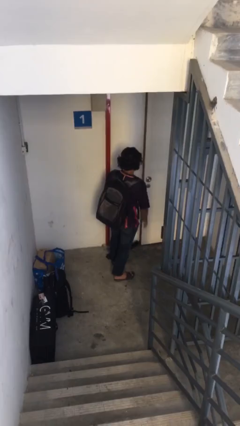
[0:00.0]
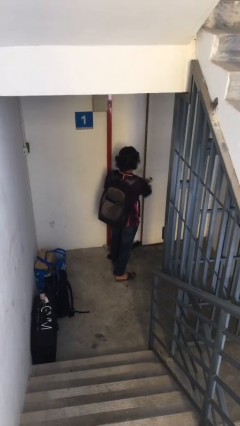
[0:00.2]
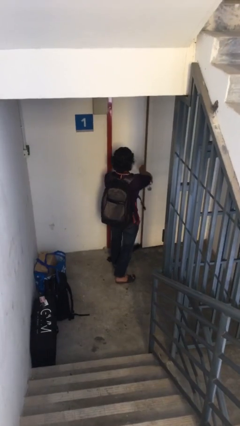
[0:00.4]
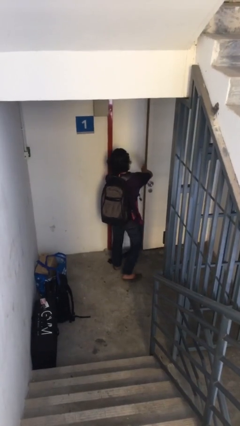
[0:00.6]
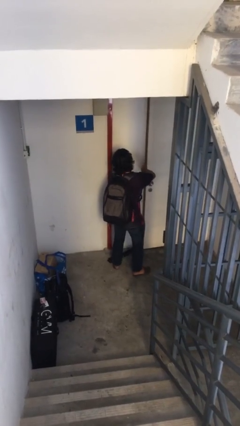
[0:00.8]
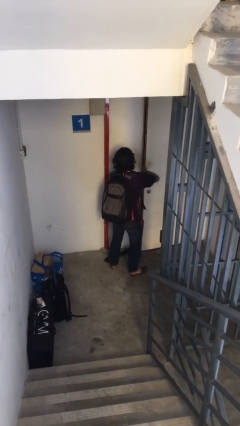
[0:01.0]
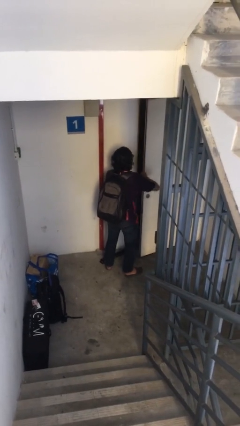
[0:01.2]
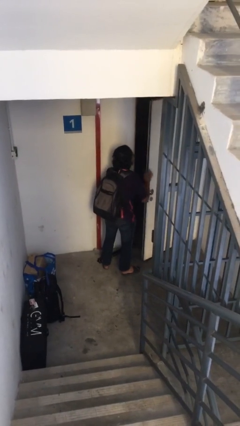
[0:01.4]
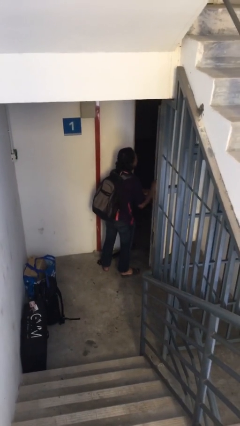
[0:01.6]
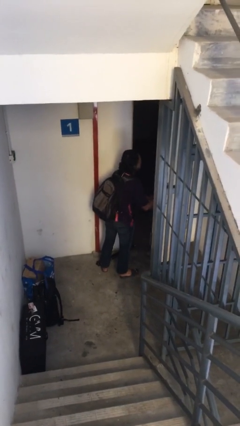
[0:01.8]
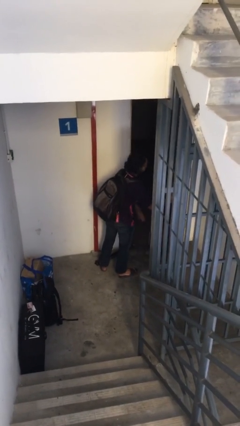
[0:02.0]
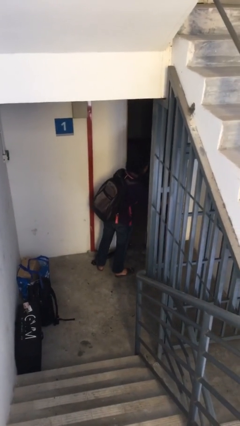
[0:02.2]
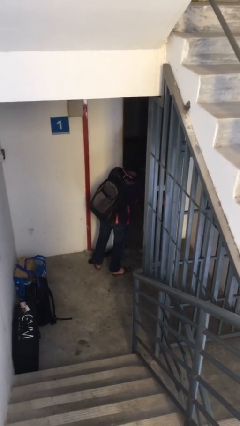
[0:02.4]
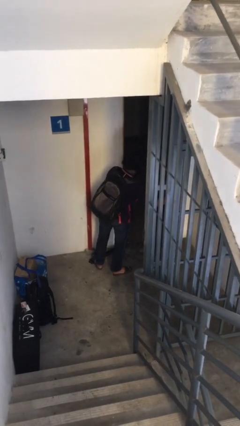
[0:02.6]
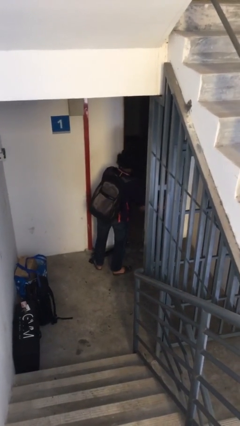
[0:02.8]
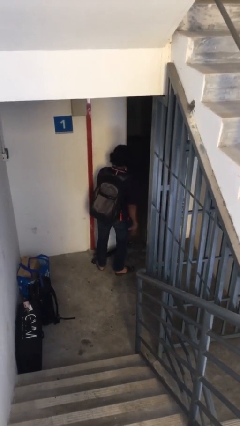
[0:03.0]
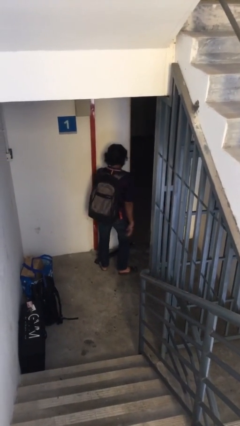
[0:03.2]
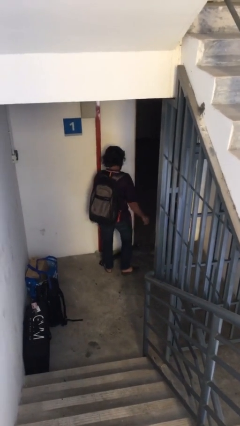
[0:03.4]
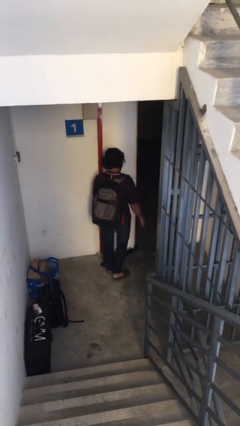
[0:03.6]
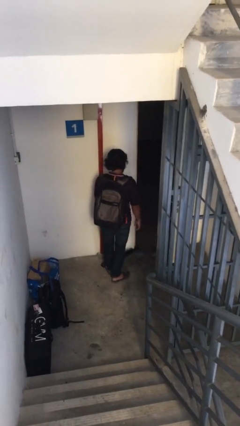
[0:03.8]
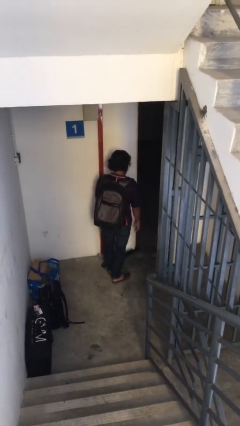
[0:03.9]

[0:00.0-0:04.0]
person opens facility door

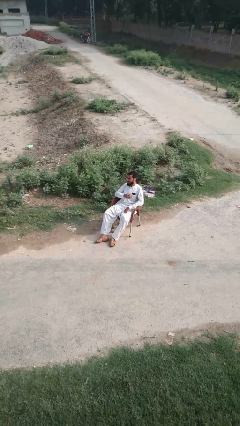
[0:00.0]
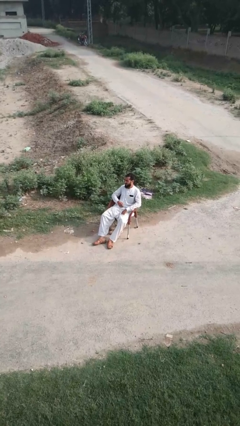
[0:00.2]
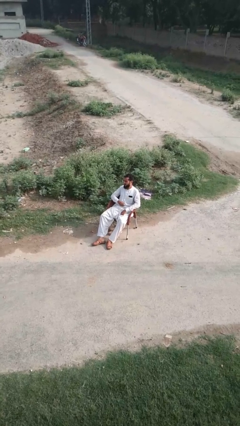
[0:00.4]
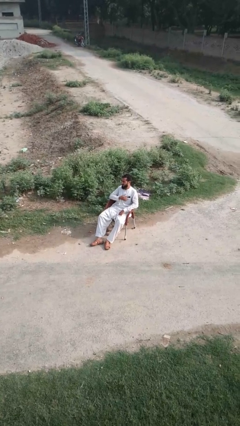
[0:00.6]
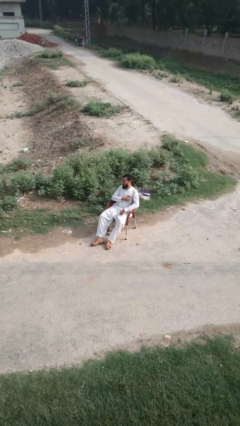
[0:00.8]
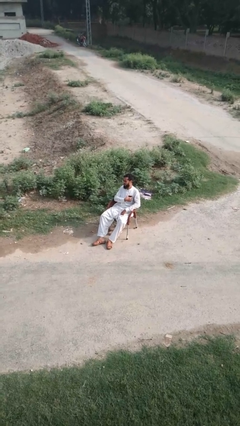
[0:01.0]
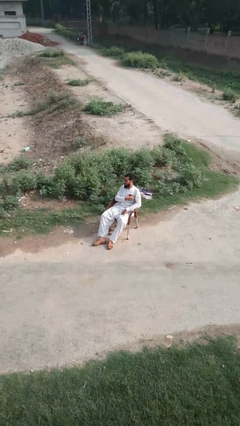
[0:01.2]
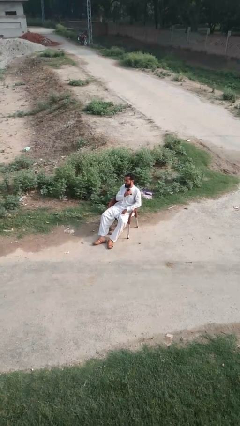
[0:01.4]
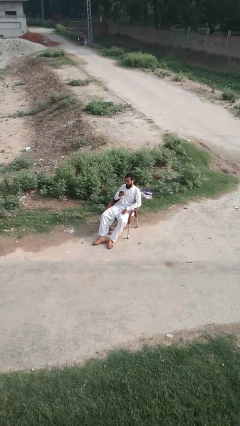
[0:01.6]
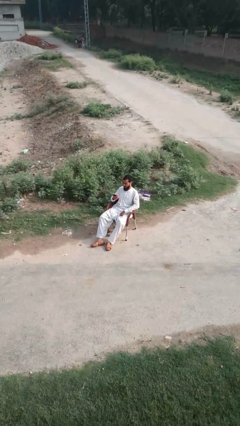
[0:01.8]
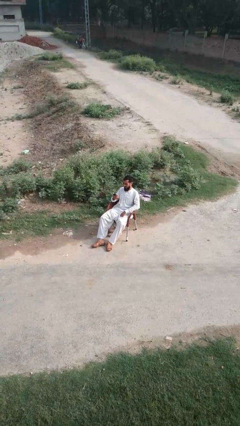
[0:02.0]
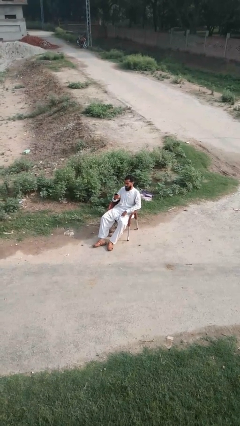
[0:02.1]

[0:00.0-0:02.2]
person takes phone from pocket

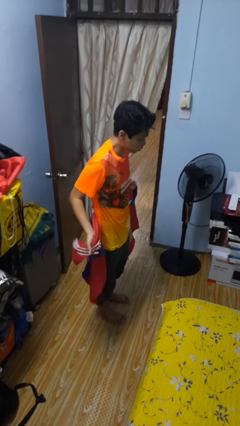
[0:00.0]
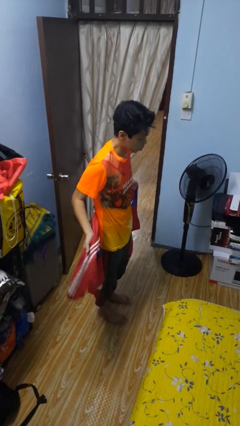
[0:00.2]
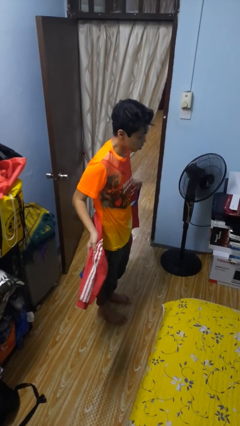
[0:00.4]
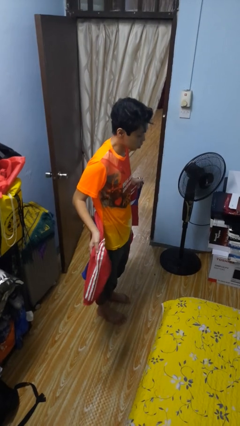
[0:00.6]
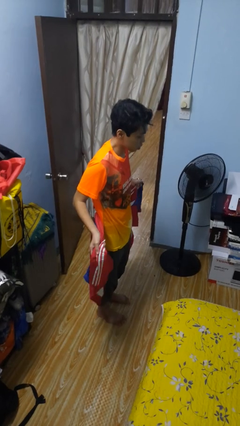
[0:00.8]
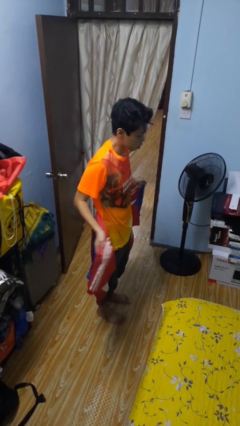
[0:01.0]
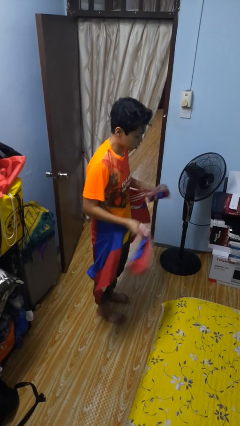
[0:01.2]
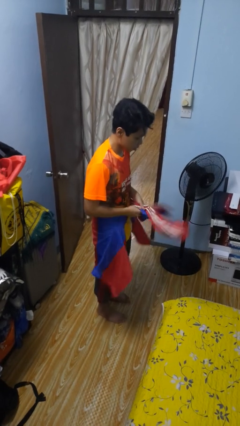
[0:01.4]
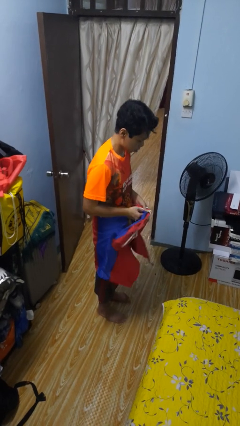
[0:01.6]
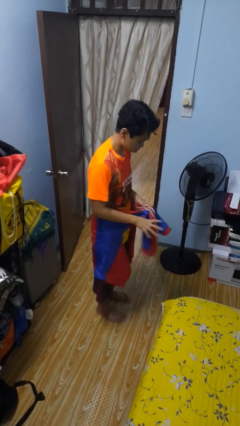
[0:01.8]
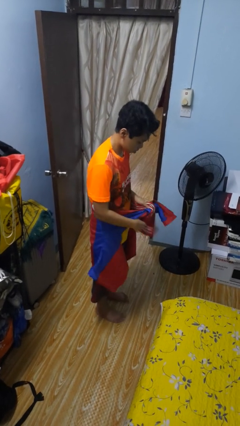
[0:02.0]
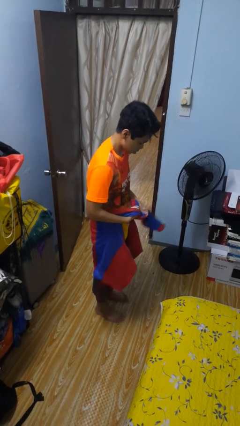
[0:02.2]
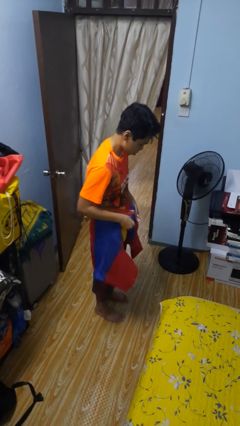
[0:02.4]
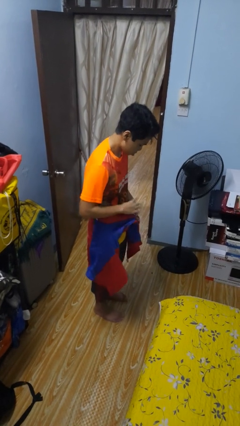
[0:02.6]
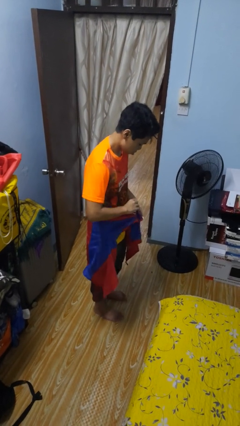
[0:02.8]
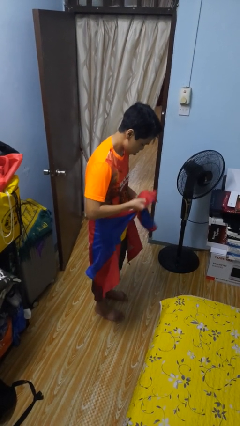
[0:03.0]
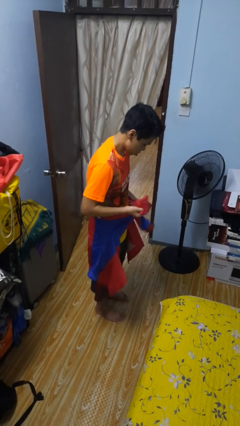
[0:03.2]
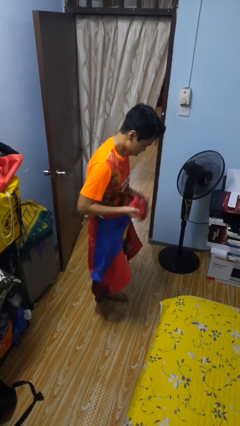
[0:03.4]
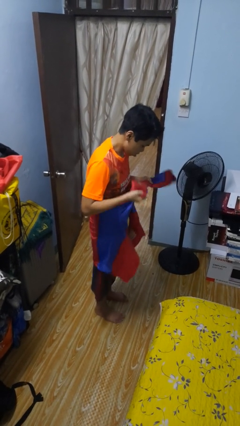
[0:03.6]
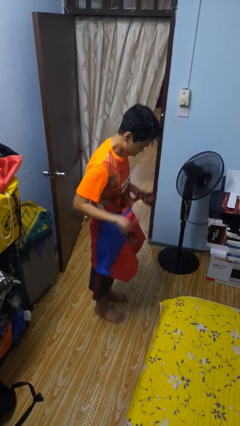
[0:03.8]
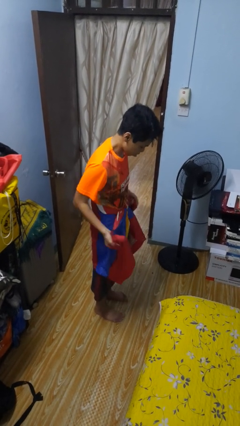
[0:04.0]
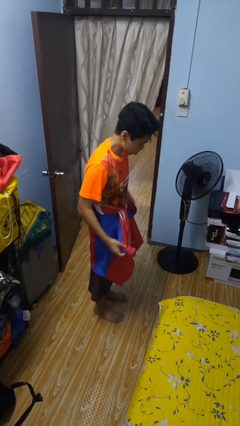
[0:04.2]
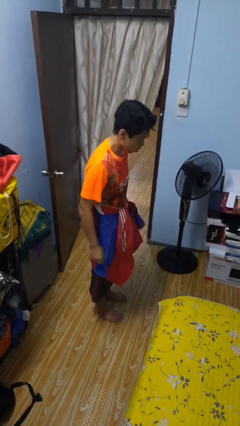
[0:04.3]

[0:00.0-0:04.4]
person ties jacket around waist

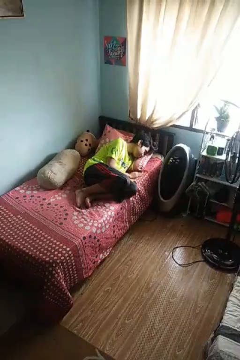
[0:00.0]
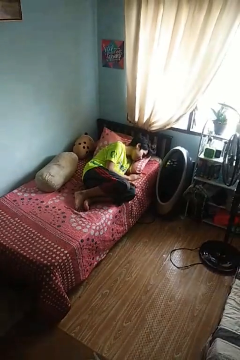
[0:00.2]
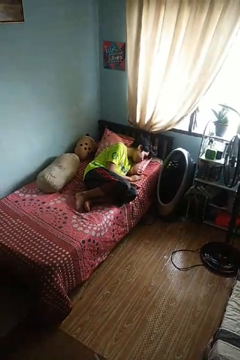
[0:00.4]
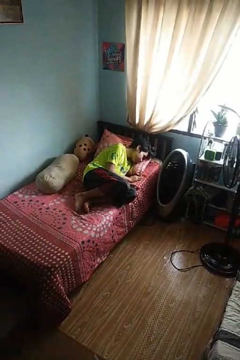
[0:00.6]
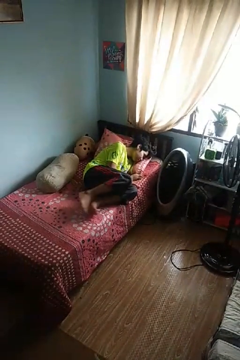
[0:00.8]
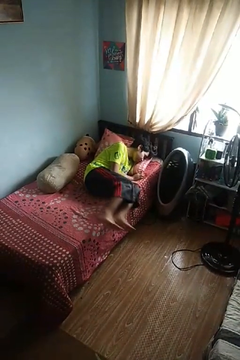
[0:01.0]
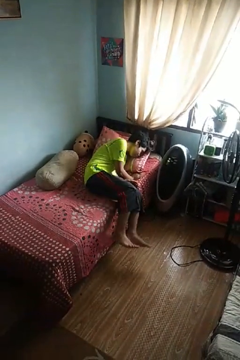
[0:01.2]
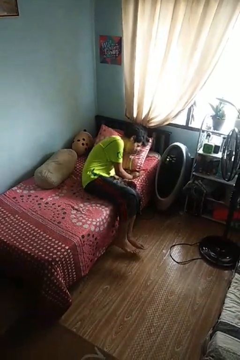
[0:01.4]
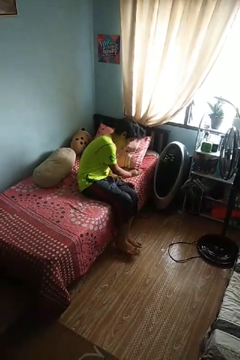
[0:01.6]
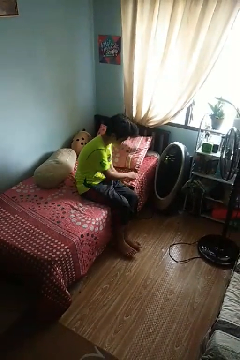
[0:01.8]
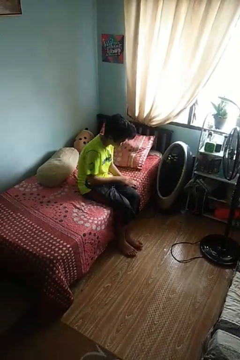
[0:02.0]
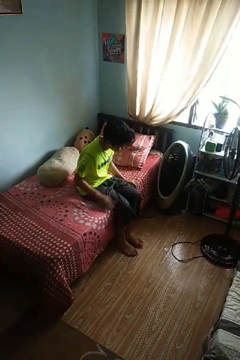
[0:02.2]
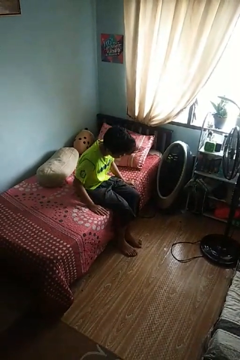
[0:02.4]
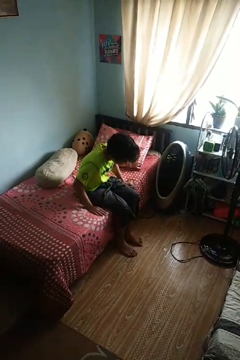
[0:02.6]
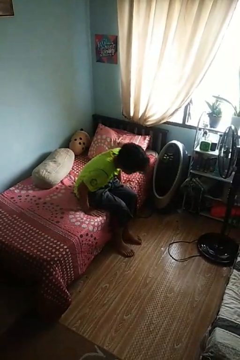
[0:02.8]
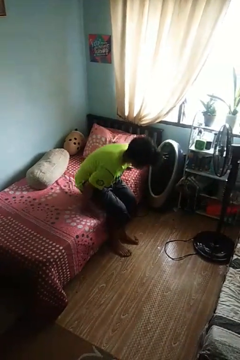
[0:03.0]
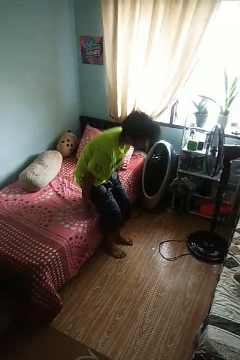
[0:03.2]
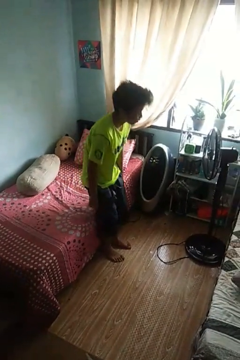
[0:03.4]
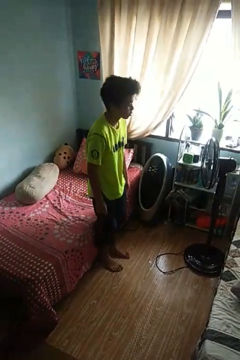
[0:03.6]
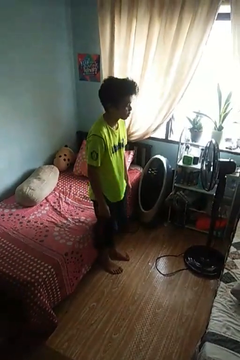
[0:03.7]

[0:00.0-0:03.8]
person stands up

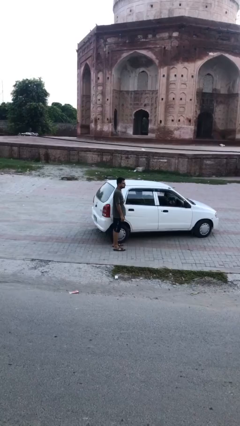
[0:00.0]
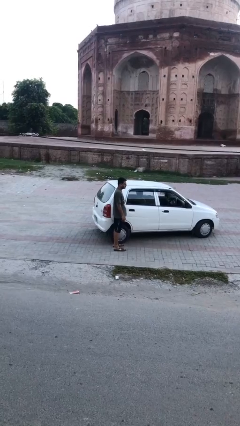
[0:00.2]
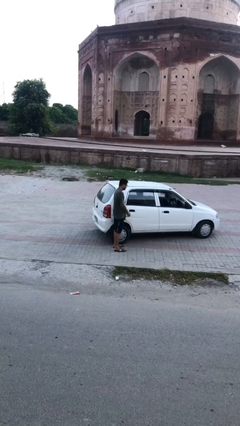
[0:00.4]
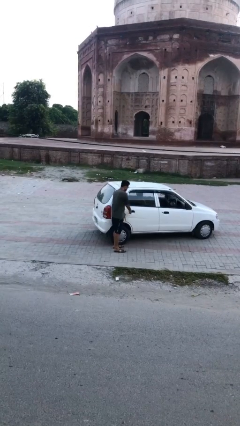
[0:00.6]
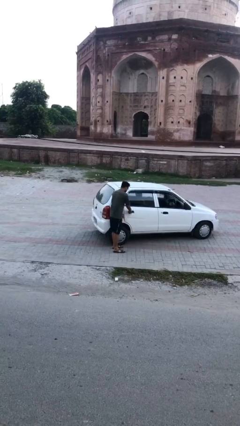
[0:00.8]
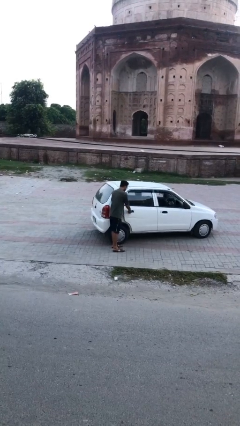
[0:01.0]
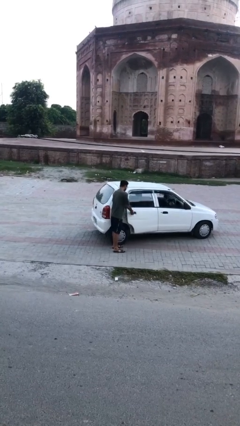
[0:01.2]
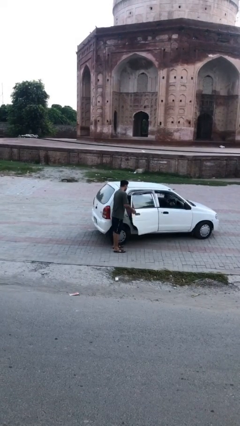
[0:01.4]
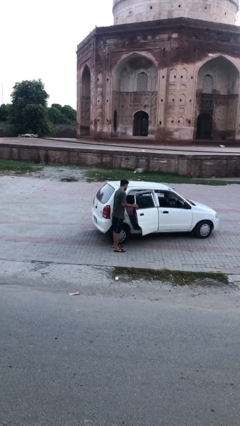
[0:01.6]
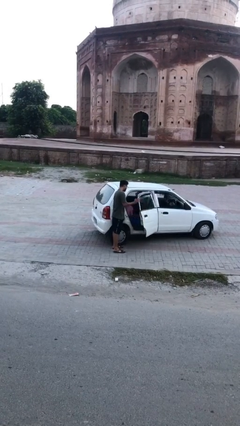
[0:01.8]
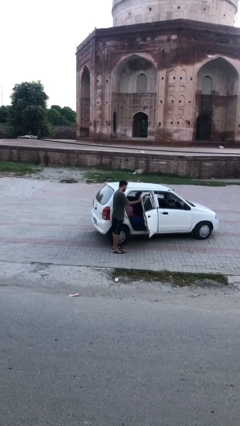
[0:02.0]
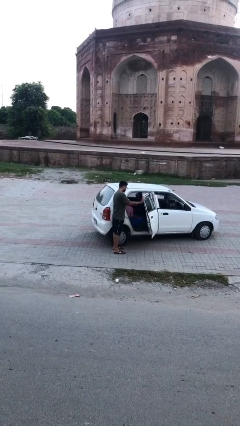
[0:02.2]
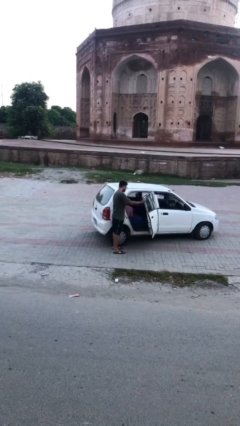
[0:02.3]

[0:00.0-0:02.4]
person opens car door

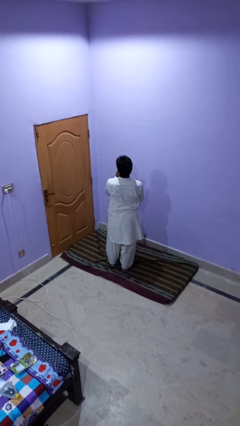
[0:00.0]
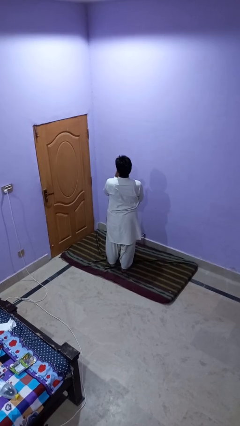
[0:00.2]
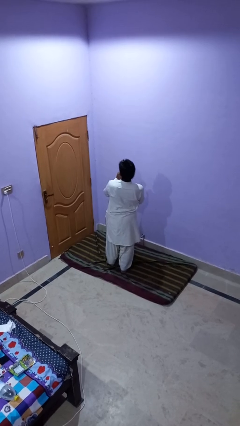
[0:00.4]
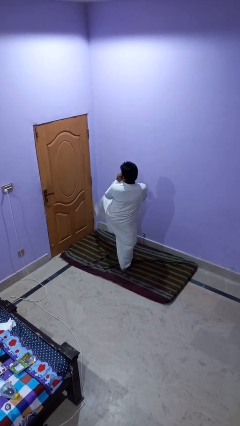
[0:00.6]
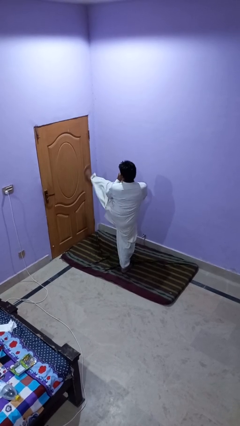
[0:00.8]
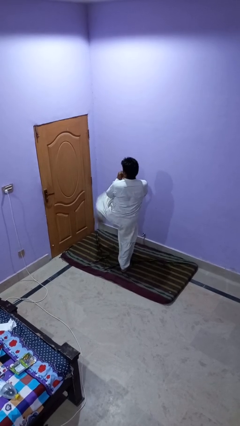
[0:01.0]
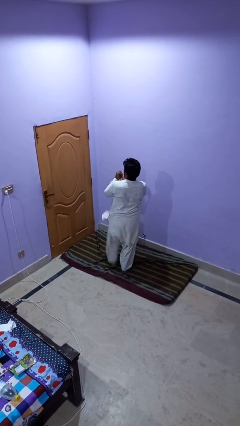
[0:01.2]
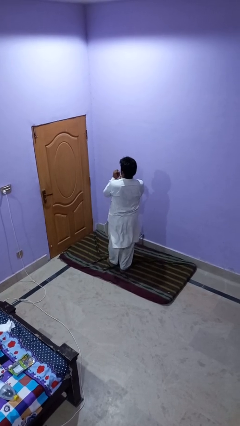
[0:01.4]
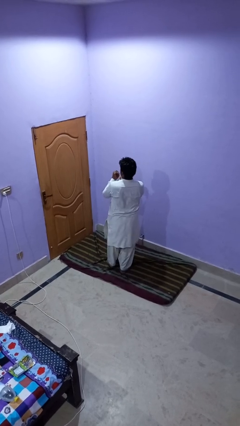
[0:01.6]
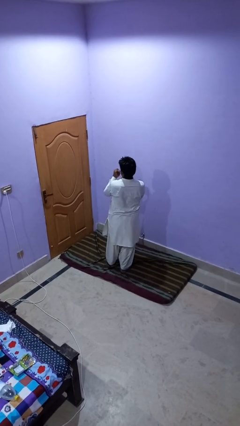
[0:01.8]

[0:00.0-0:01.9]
person karate kicks
